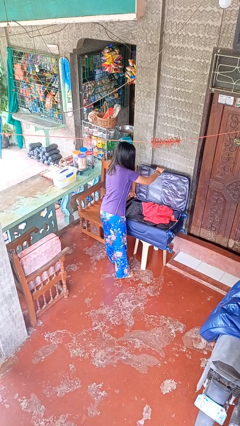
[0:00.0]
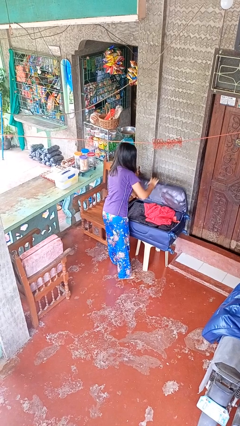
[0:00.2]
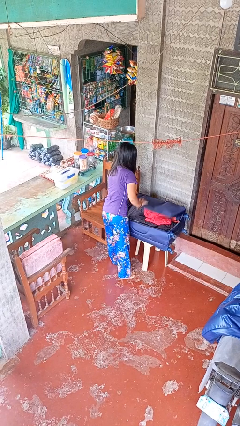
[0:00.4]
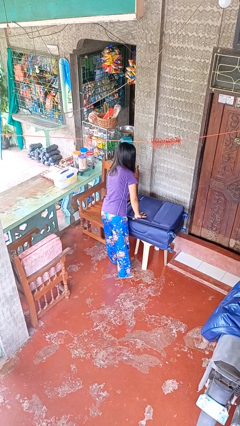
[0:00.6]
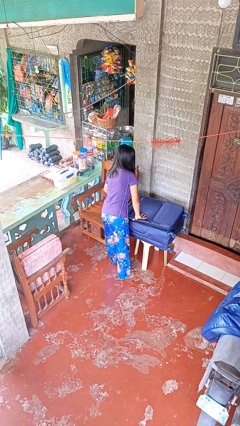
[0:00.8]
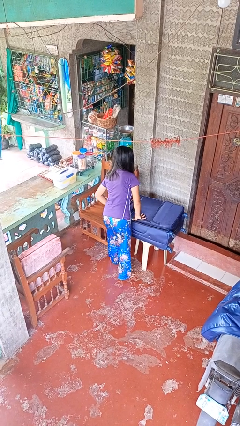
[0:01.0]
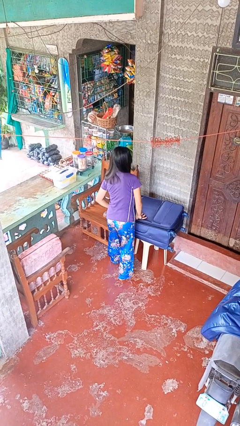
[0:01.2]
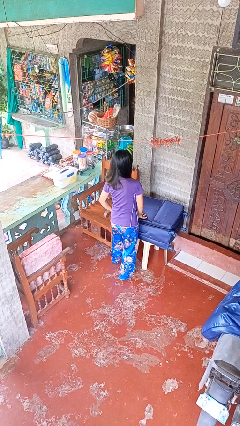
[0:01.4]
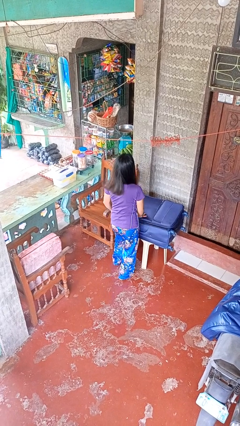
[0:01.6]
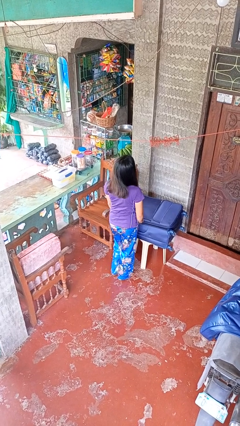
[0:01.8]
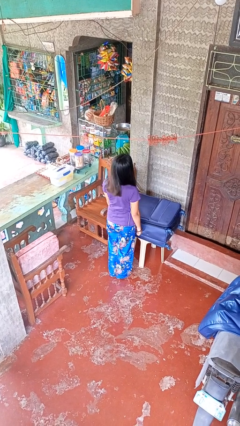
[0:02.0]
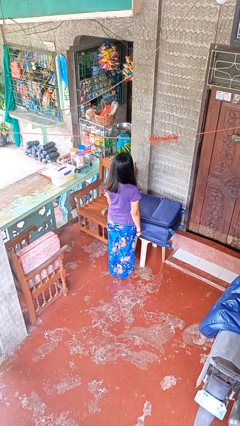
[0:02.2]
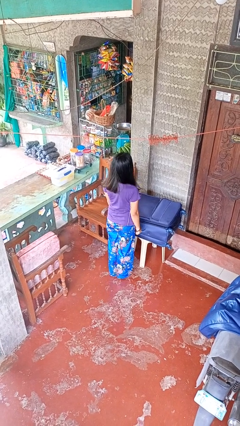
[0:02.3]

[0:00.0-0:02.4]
person closes suitcase

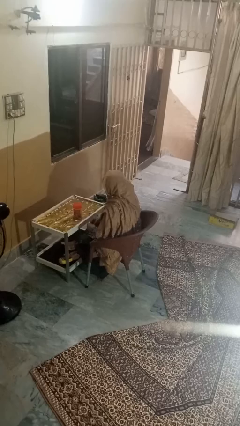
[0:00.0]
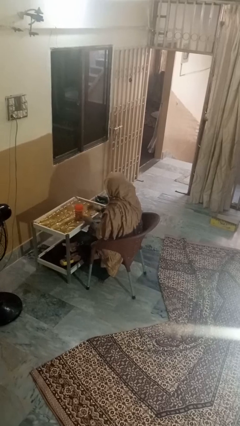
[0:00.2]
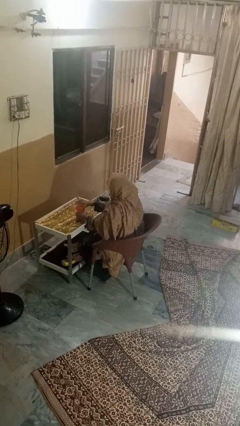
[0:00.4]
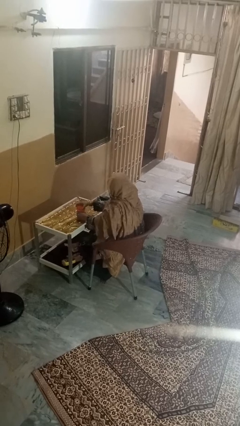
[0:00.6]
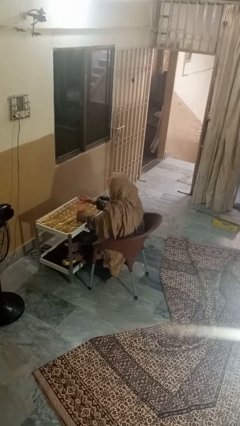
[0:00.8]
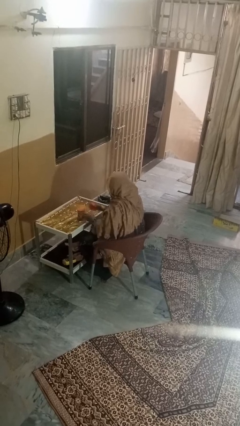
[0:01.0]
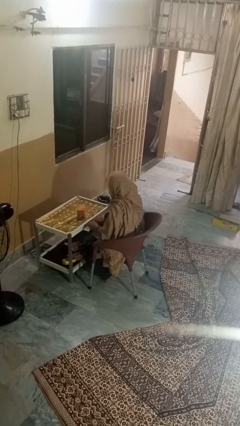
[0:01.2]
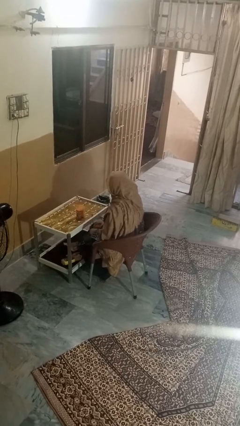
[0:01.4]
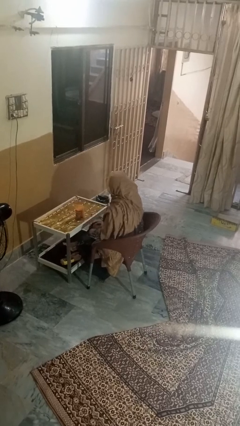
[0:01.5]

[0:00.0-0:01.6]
person opens jar

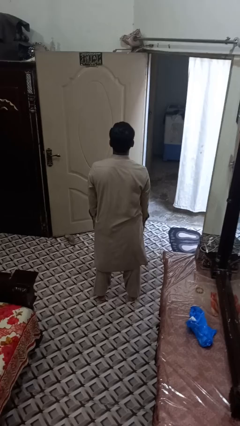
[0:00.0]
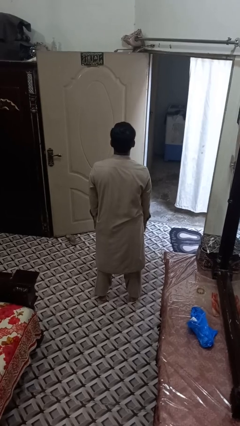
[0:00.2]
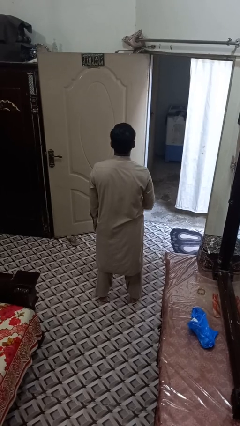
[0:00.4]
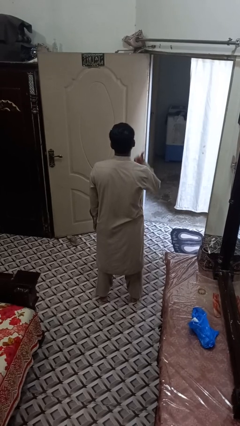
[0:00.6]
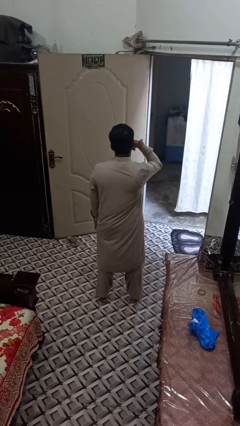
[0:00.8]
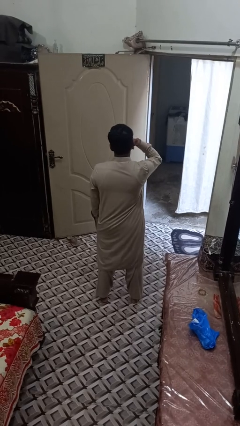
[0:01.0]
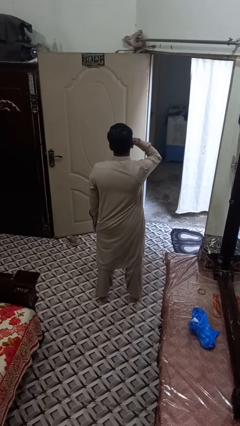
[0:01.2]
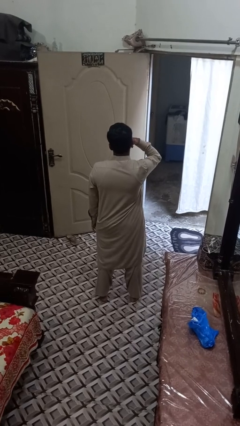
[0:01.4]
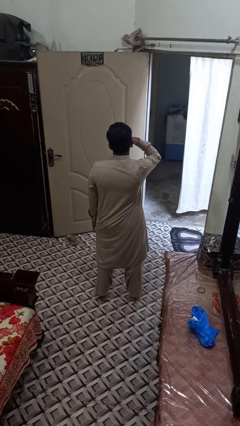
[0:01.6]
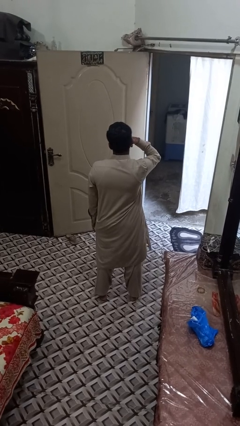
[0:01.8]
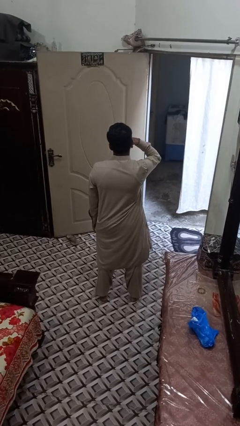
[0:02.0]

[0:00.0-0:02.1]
person gestures call me

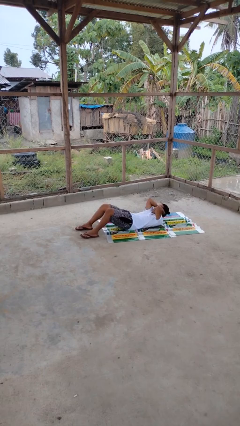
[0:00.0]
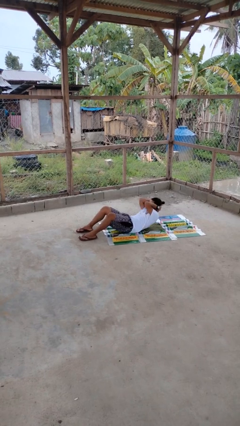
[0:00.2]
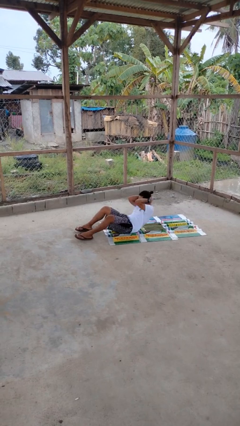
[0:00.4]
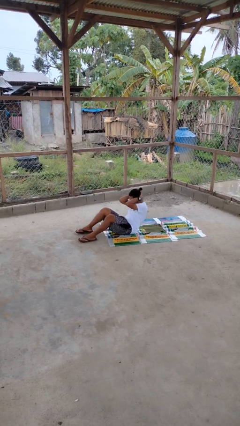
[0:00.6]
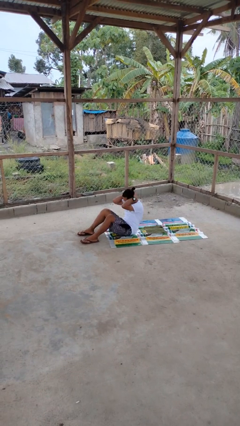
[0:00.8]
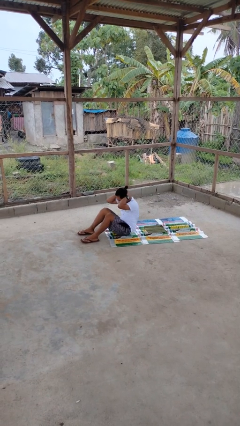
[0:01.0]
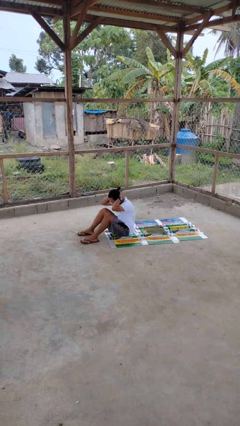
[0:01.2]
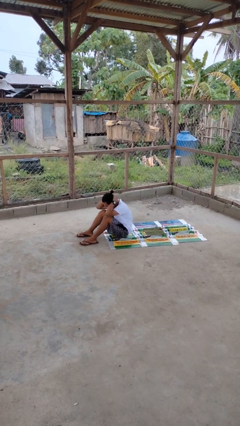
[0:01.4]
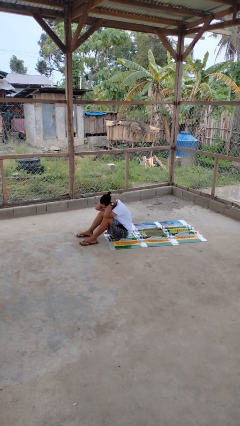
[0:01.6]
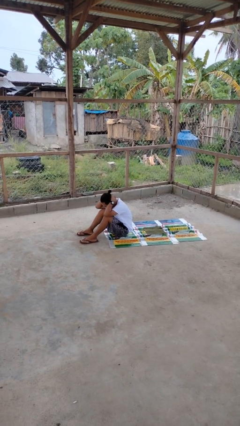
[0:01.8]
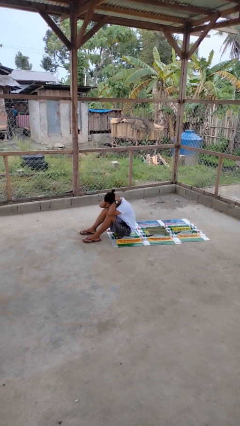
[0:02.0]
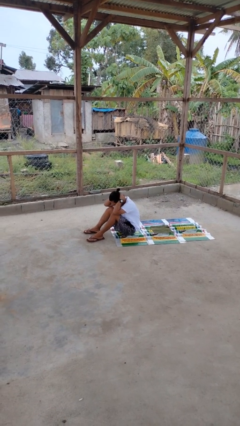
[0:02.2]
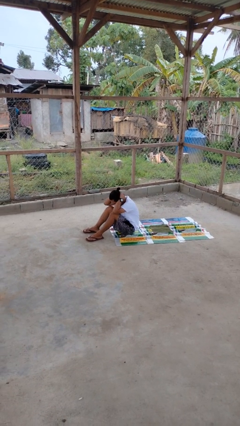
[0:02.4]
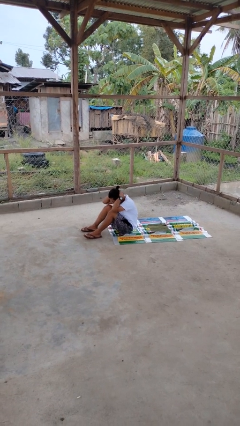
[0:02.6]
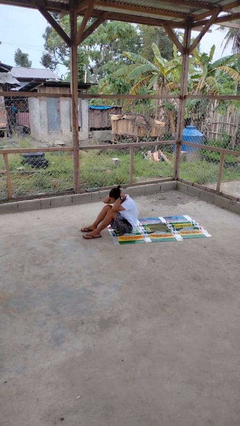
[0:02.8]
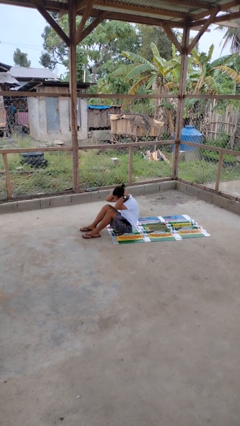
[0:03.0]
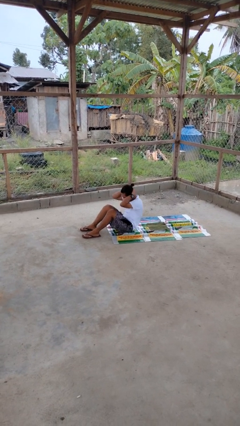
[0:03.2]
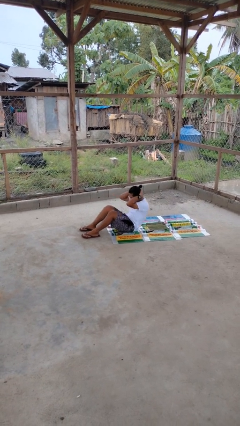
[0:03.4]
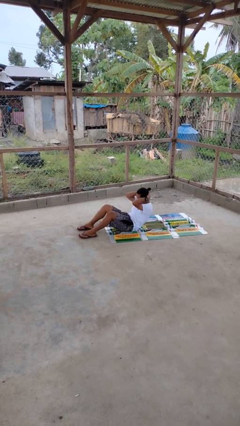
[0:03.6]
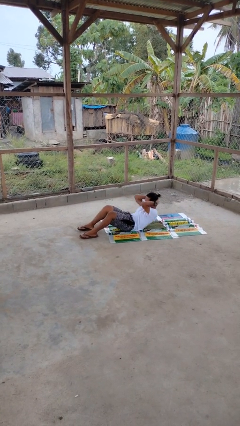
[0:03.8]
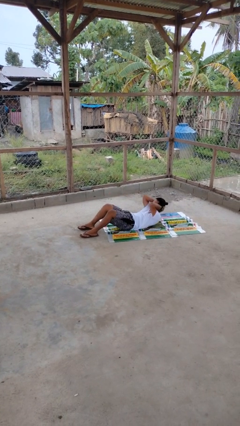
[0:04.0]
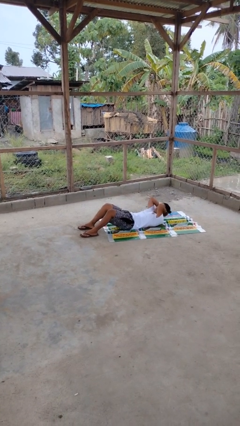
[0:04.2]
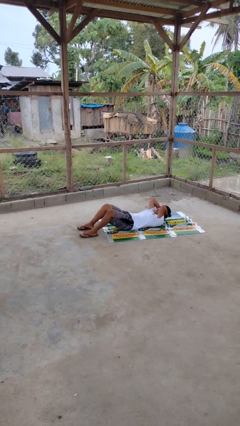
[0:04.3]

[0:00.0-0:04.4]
person exercises with situp

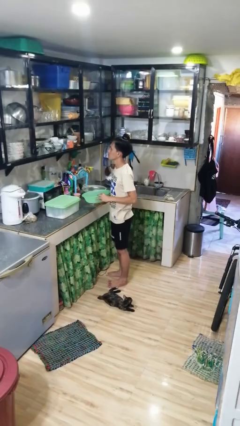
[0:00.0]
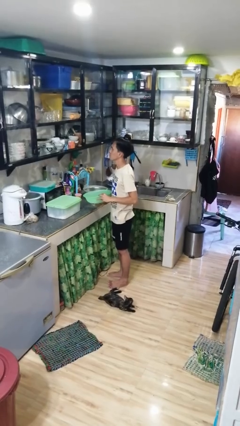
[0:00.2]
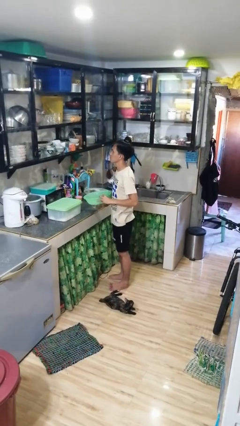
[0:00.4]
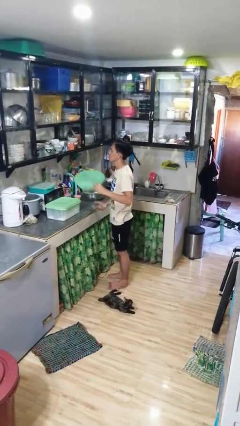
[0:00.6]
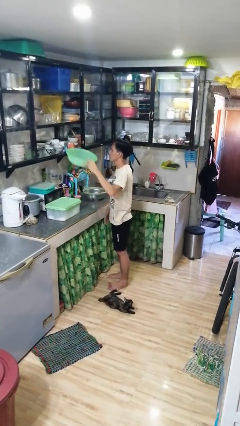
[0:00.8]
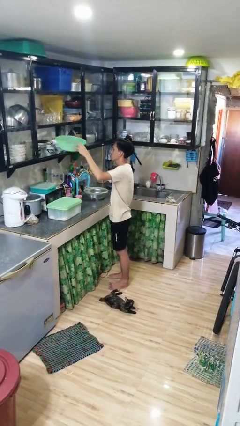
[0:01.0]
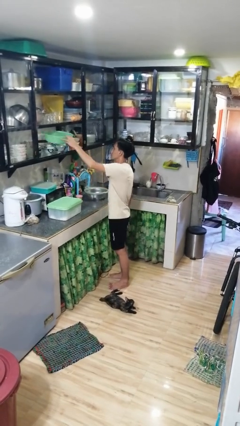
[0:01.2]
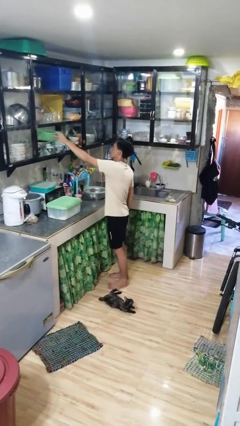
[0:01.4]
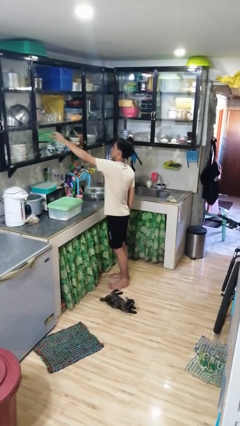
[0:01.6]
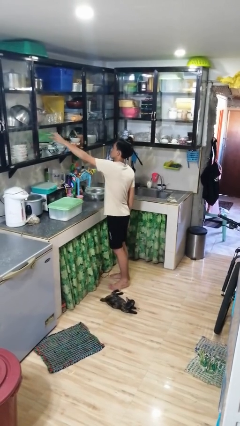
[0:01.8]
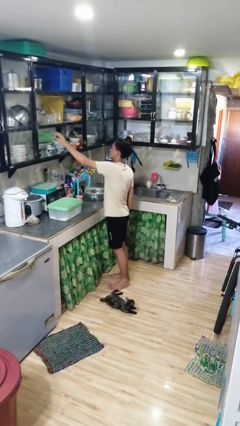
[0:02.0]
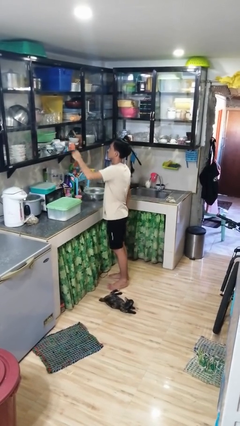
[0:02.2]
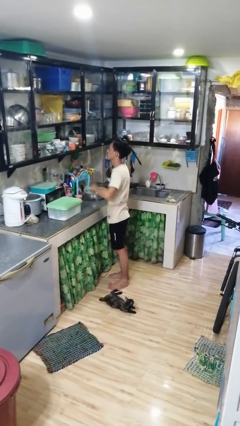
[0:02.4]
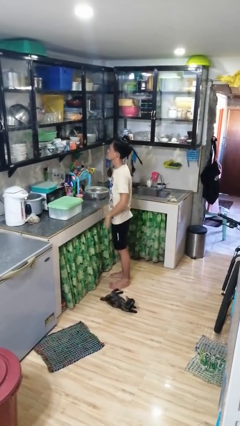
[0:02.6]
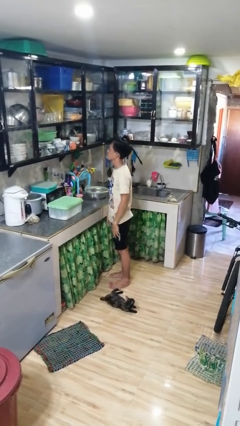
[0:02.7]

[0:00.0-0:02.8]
person puts down object into cabinet

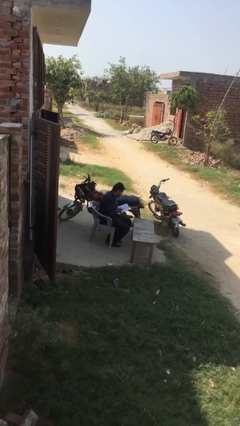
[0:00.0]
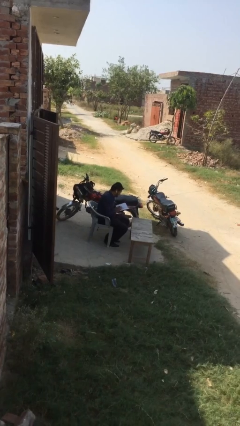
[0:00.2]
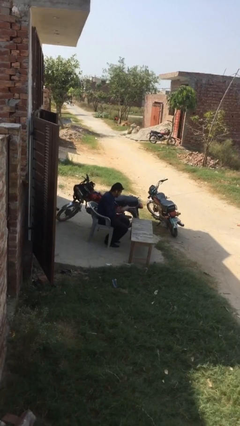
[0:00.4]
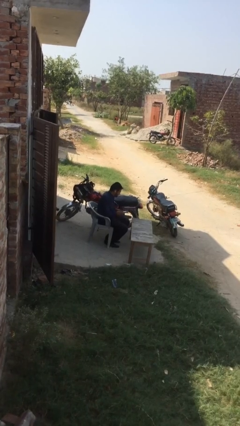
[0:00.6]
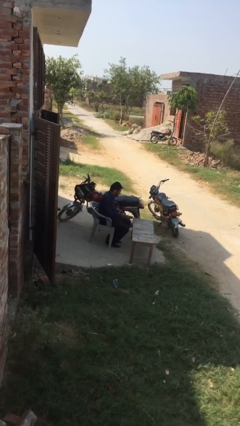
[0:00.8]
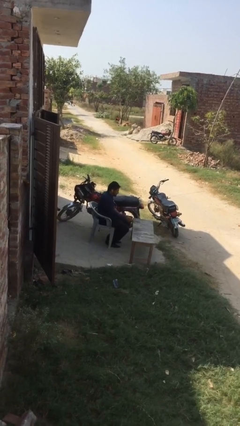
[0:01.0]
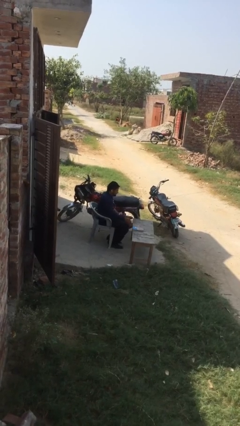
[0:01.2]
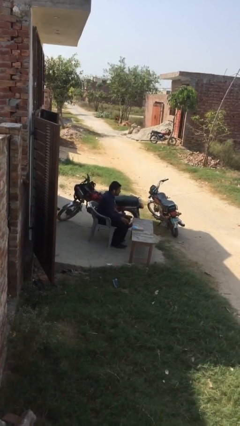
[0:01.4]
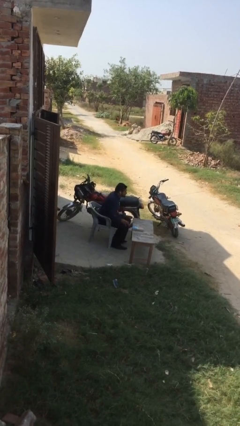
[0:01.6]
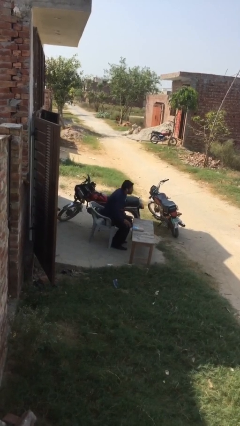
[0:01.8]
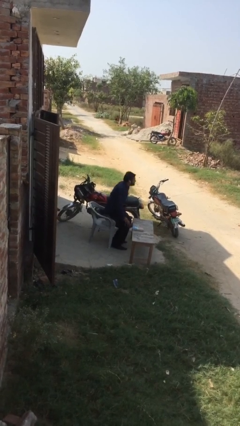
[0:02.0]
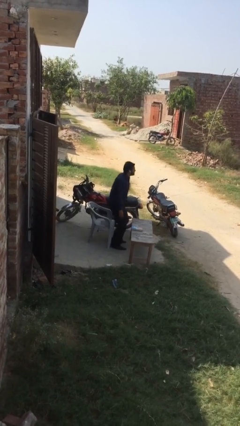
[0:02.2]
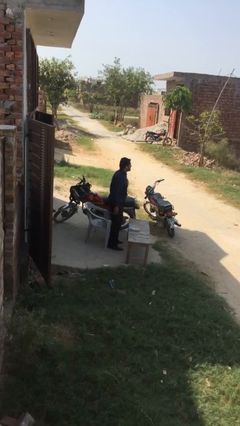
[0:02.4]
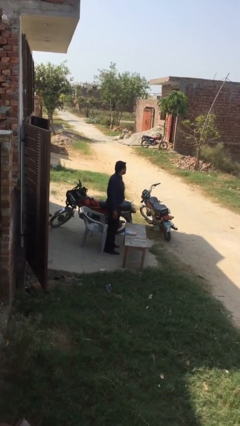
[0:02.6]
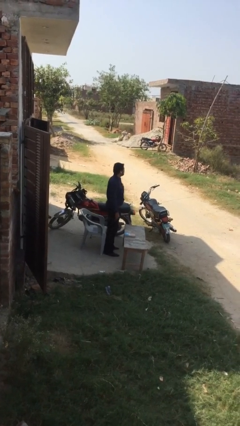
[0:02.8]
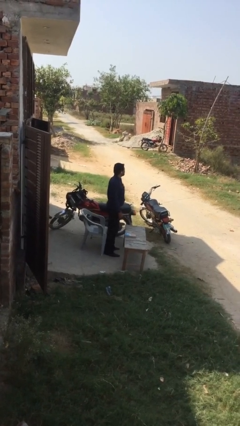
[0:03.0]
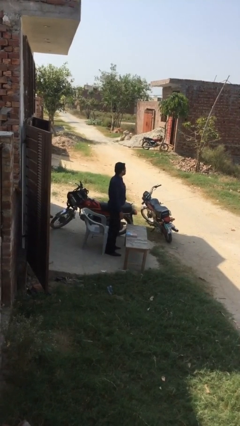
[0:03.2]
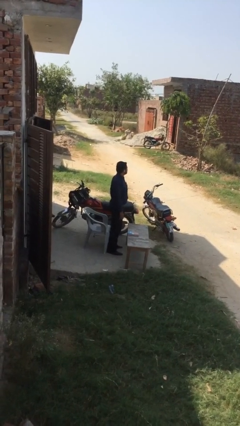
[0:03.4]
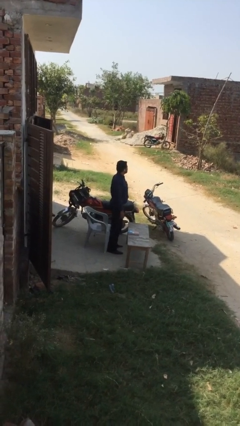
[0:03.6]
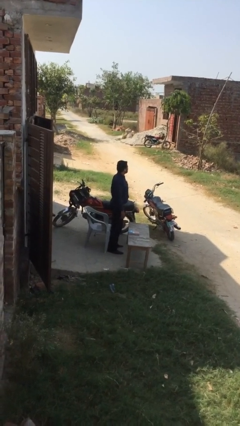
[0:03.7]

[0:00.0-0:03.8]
person stands up

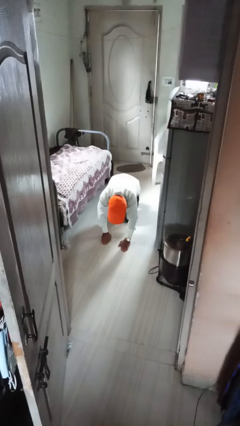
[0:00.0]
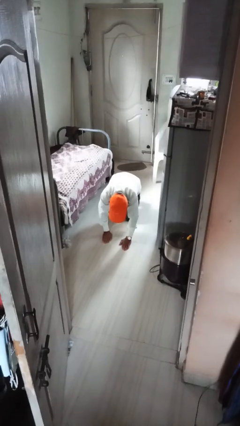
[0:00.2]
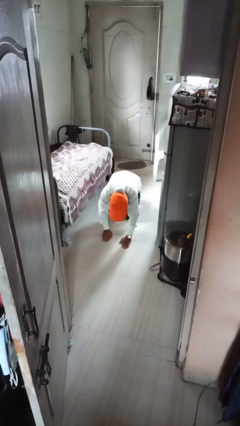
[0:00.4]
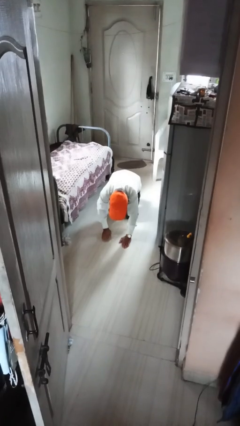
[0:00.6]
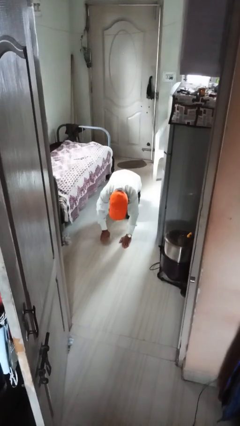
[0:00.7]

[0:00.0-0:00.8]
person crawls
